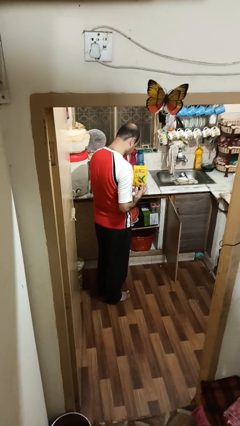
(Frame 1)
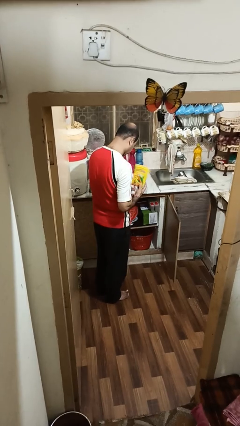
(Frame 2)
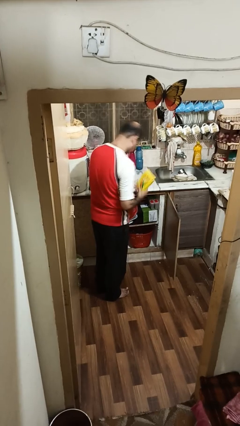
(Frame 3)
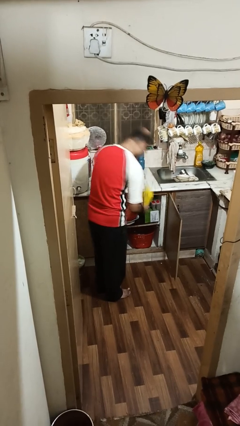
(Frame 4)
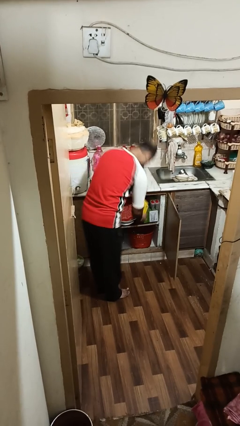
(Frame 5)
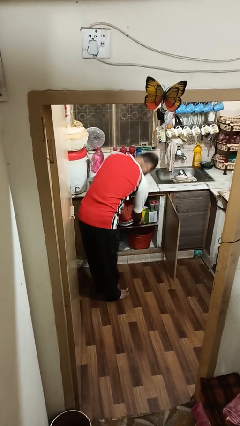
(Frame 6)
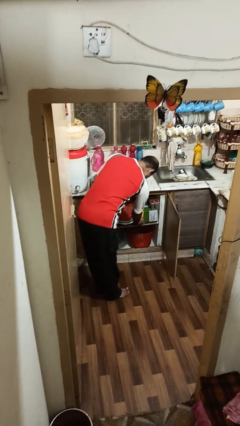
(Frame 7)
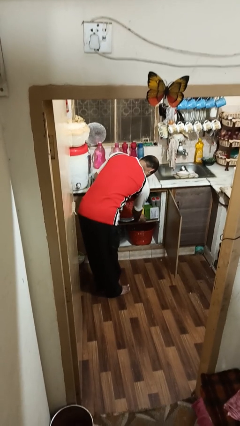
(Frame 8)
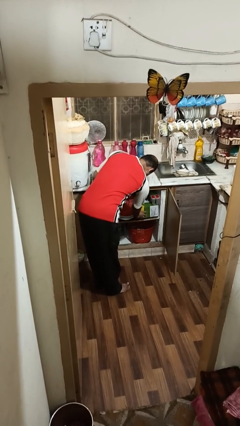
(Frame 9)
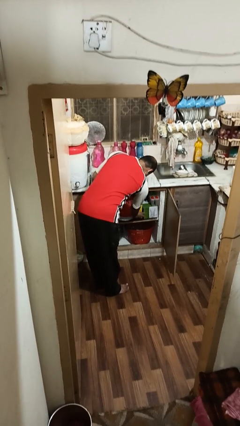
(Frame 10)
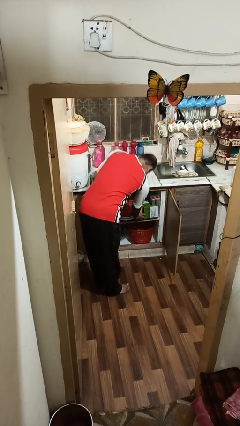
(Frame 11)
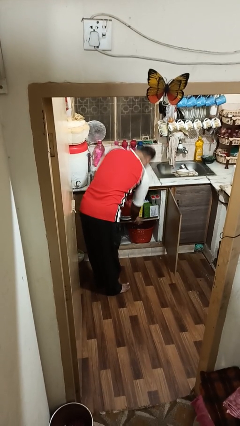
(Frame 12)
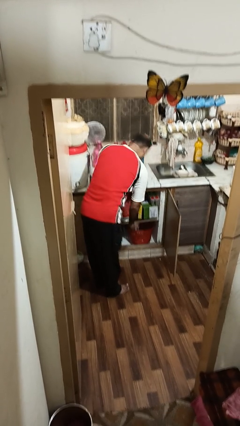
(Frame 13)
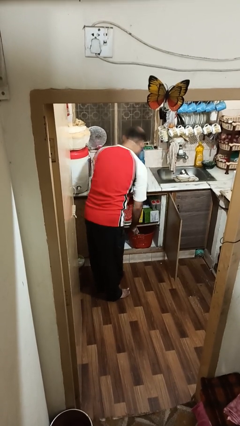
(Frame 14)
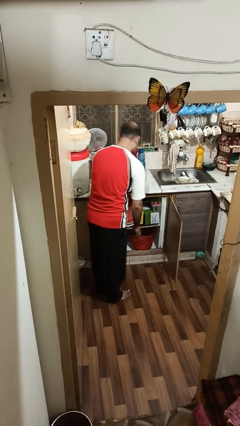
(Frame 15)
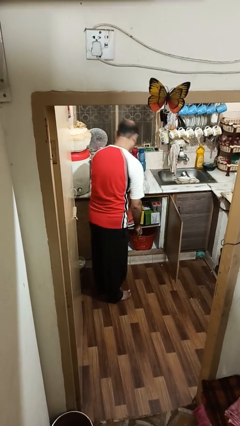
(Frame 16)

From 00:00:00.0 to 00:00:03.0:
person puts object in cabinet

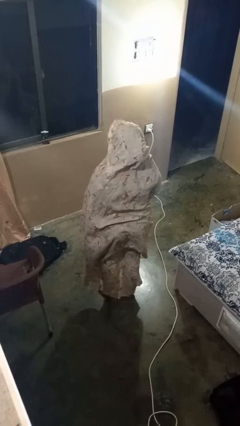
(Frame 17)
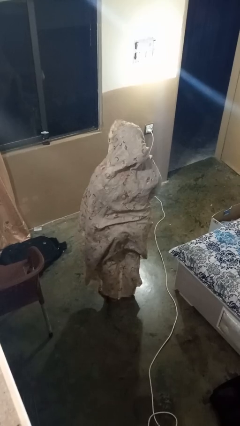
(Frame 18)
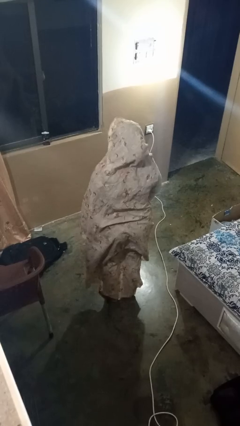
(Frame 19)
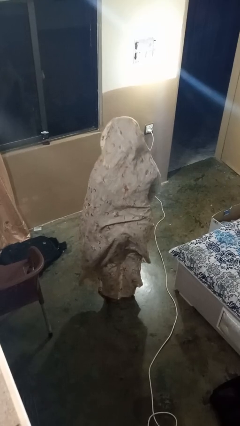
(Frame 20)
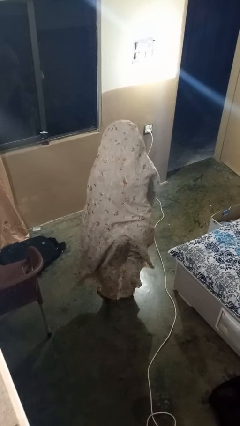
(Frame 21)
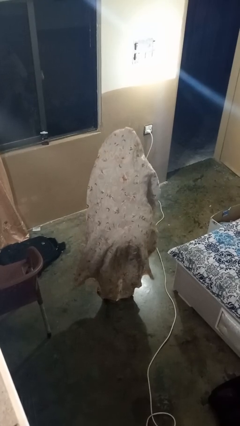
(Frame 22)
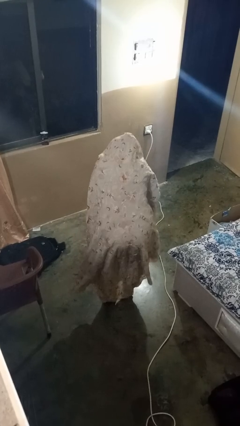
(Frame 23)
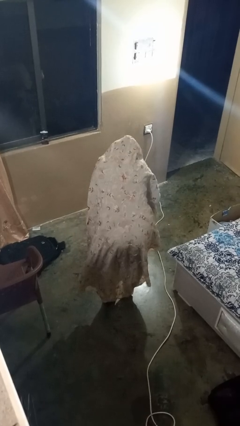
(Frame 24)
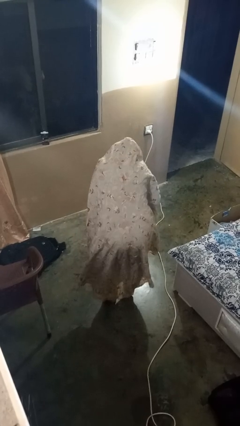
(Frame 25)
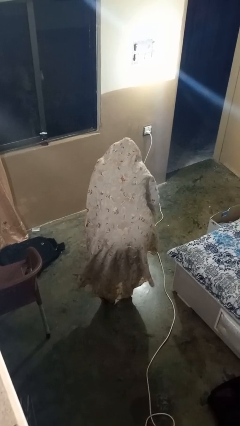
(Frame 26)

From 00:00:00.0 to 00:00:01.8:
person bows

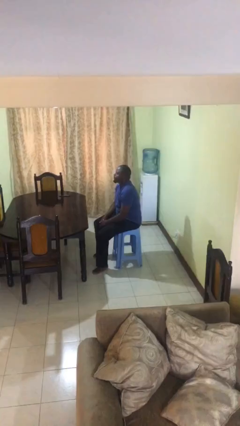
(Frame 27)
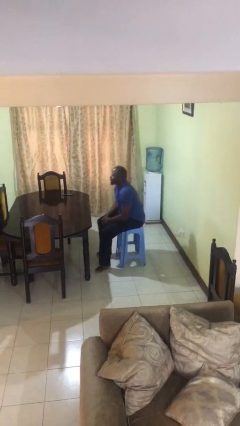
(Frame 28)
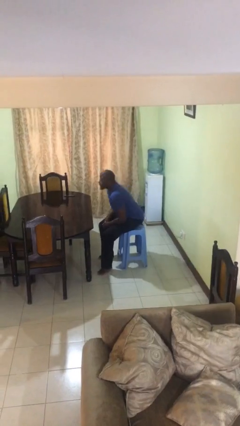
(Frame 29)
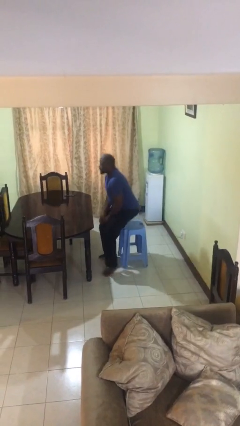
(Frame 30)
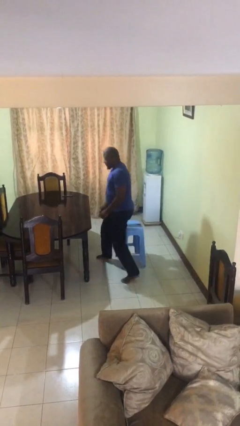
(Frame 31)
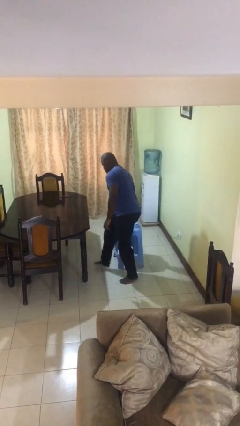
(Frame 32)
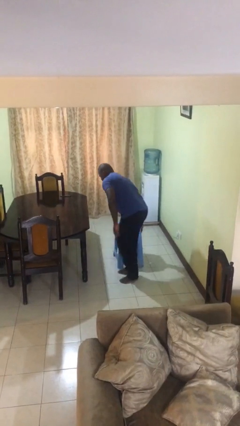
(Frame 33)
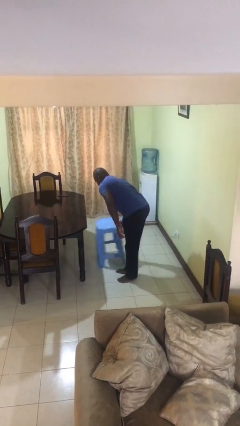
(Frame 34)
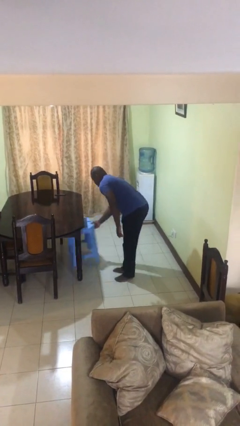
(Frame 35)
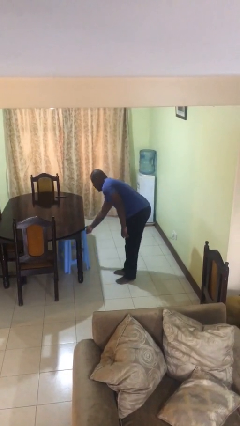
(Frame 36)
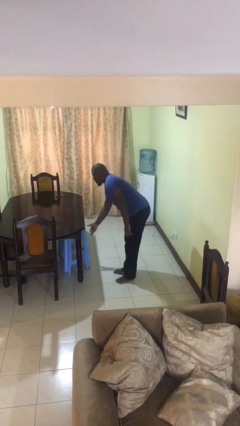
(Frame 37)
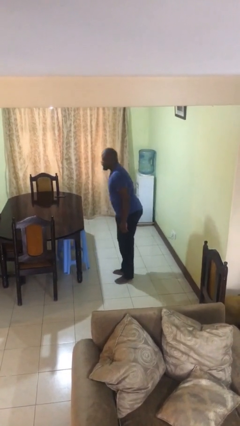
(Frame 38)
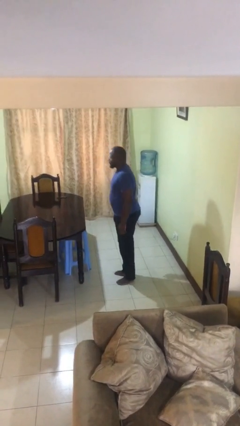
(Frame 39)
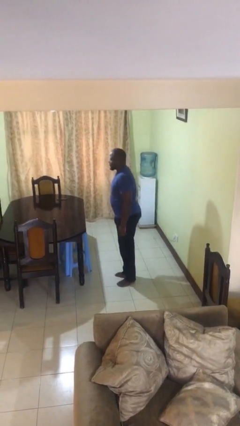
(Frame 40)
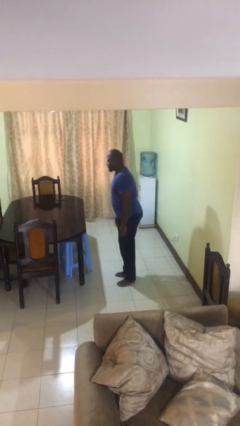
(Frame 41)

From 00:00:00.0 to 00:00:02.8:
person stands up

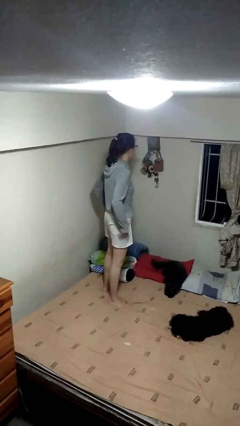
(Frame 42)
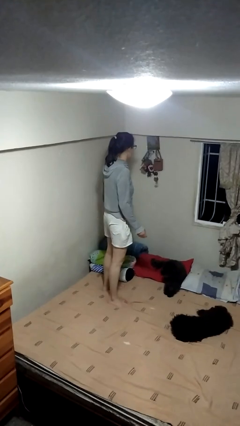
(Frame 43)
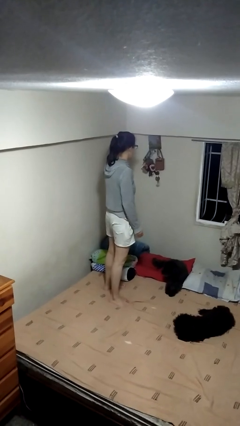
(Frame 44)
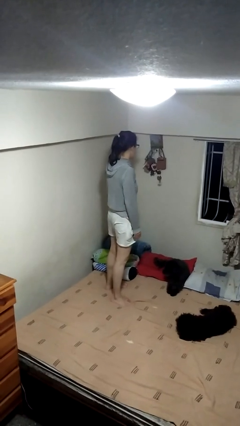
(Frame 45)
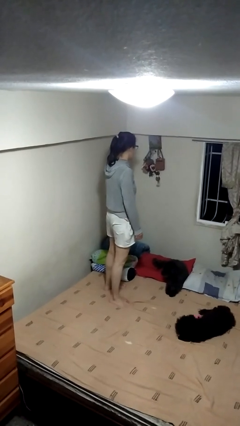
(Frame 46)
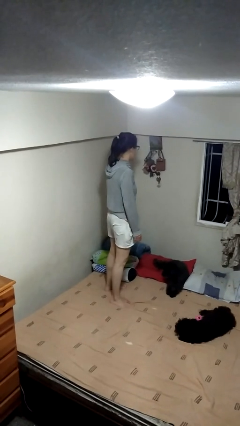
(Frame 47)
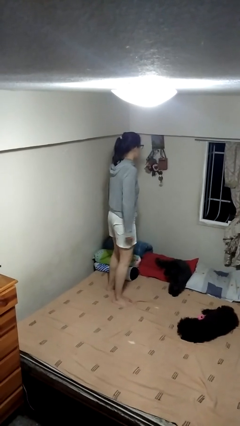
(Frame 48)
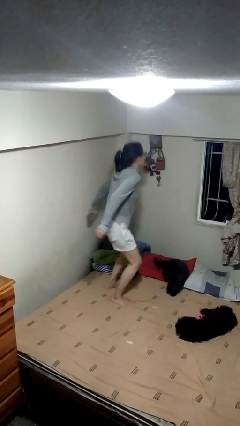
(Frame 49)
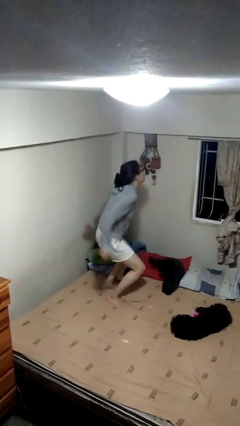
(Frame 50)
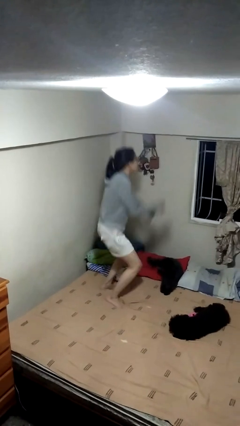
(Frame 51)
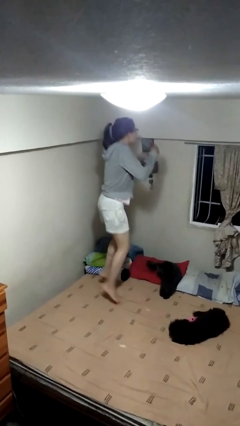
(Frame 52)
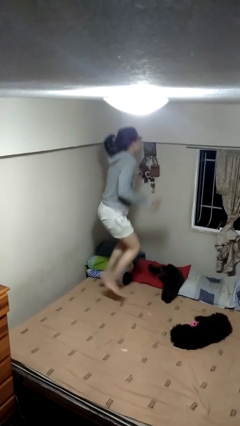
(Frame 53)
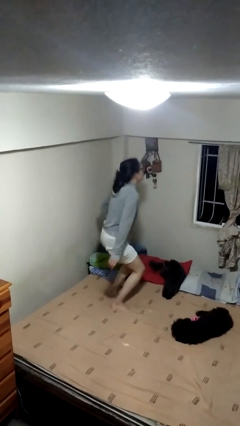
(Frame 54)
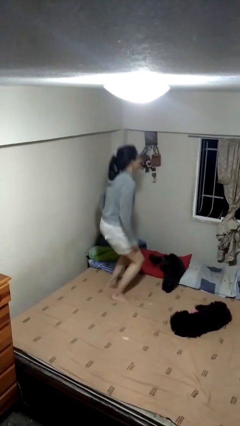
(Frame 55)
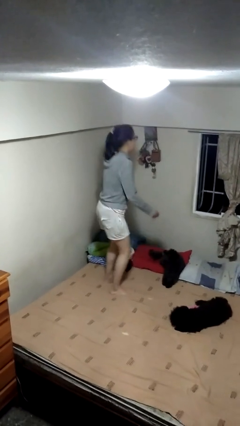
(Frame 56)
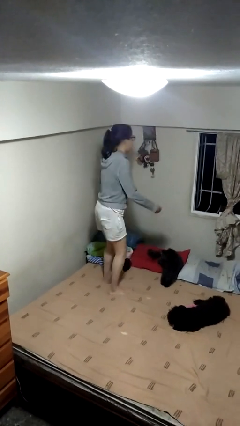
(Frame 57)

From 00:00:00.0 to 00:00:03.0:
person jumps on bed

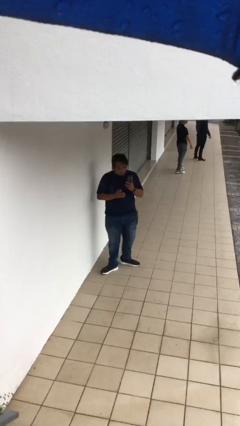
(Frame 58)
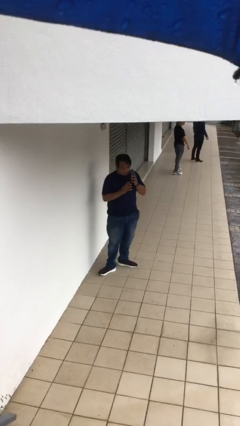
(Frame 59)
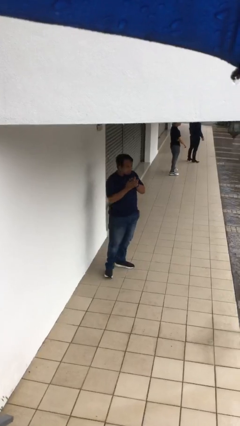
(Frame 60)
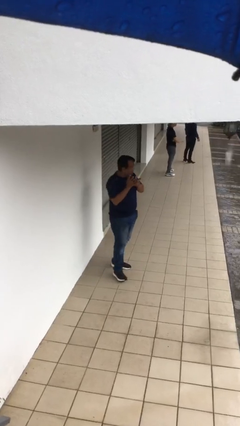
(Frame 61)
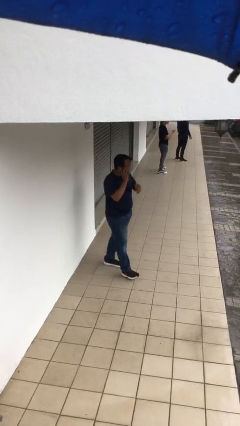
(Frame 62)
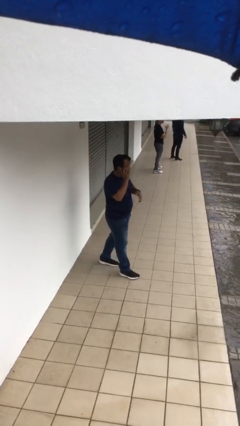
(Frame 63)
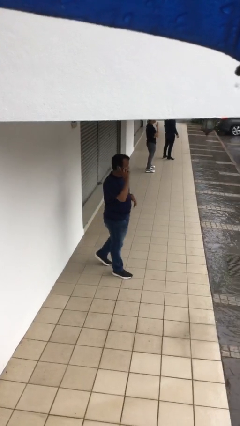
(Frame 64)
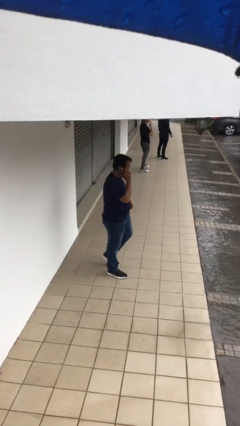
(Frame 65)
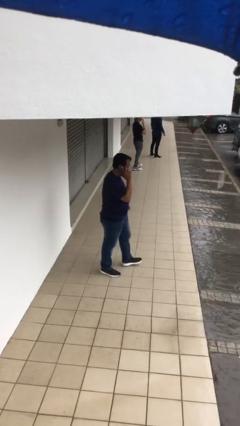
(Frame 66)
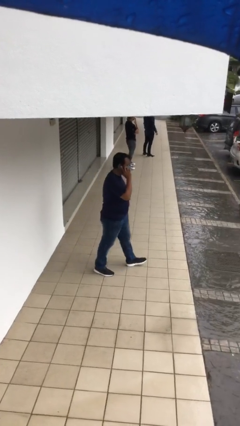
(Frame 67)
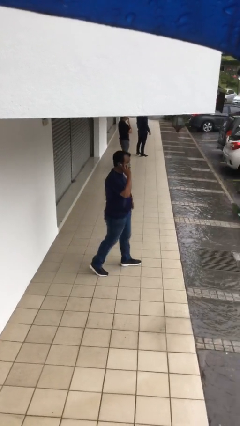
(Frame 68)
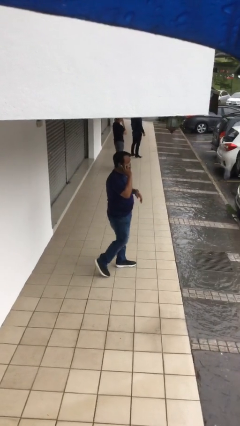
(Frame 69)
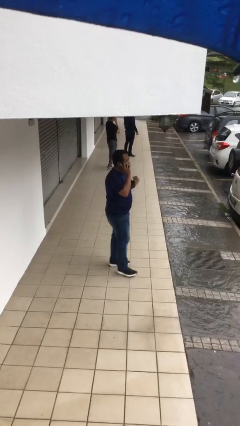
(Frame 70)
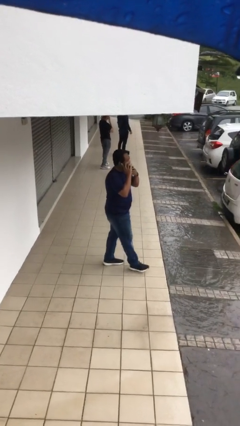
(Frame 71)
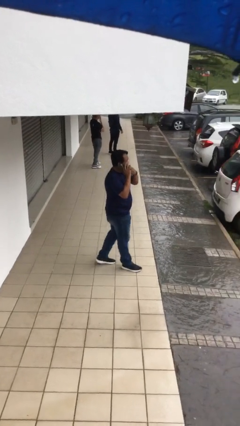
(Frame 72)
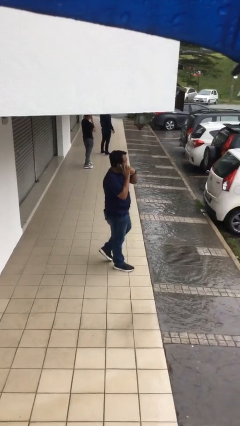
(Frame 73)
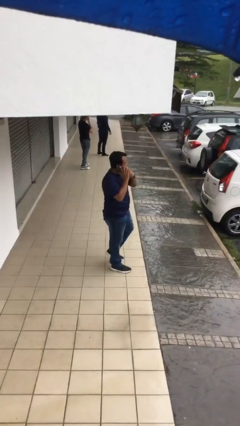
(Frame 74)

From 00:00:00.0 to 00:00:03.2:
person talks on phone

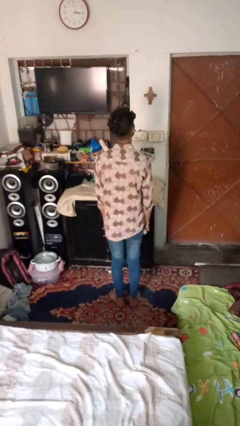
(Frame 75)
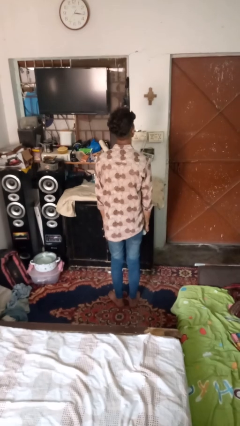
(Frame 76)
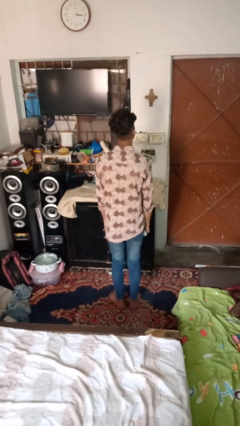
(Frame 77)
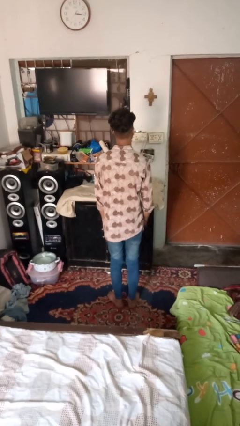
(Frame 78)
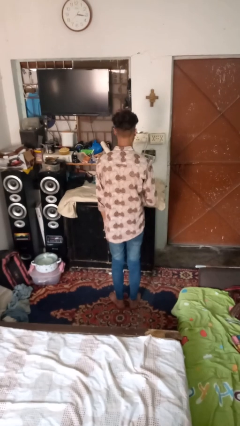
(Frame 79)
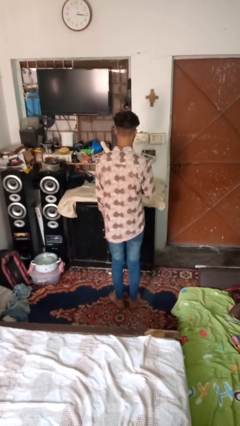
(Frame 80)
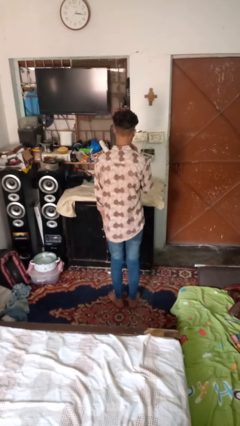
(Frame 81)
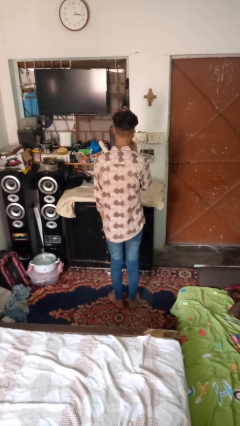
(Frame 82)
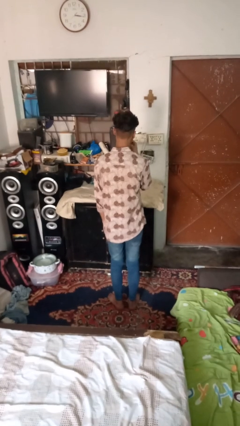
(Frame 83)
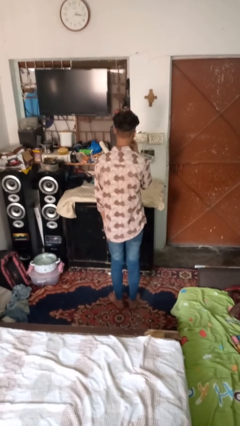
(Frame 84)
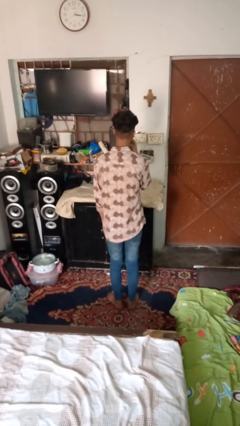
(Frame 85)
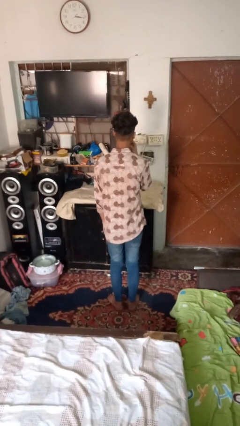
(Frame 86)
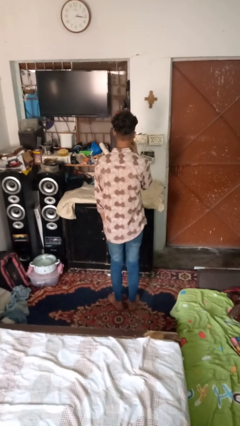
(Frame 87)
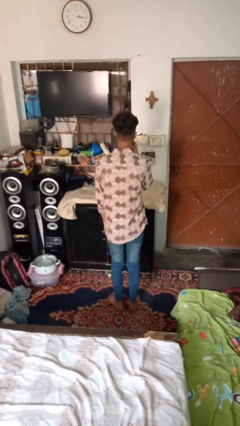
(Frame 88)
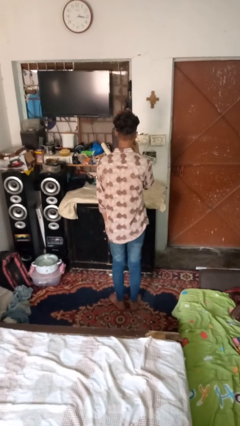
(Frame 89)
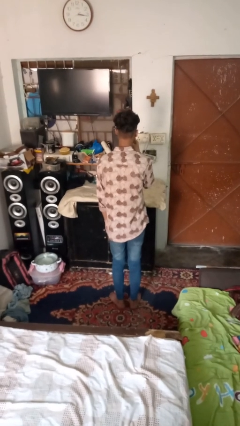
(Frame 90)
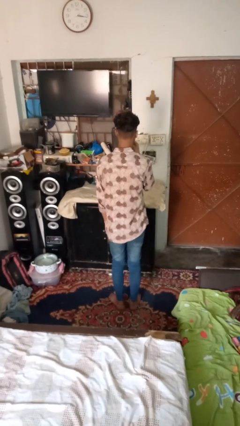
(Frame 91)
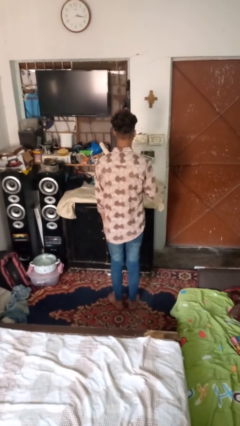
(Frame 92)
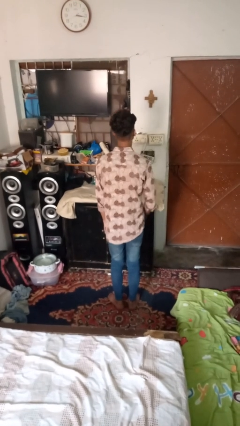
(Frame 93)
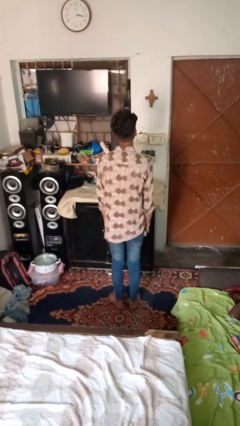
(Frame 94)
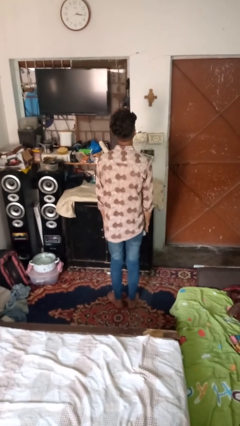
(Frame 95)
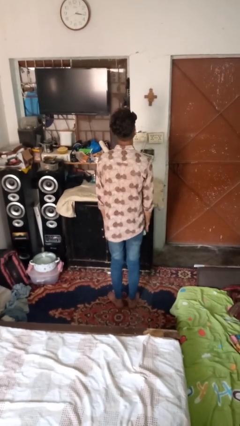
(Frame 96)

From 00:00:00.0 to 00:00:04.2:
person vapes
